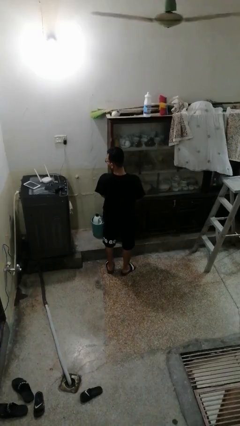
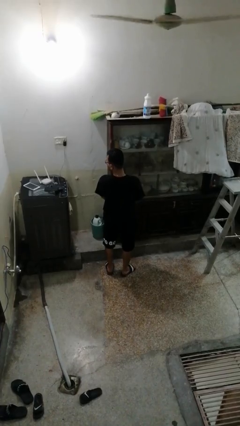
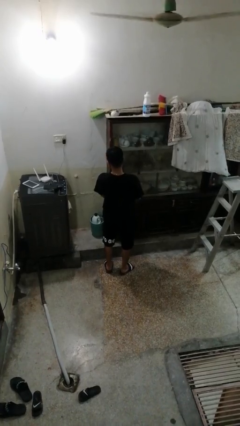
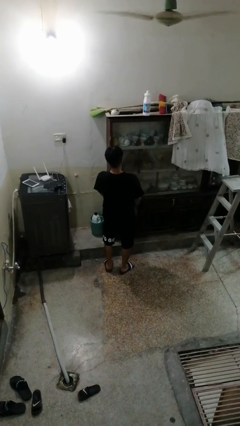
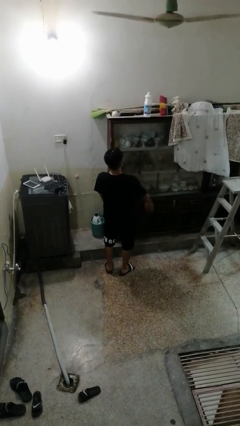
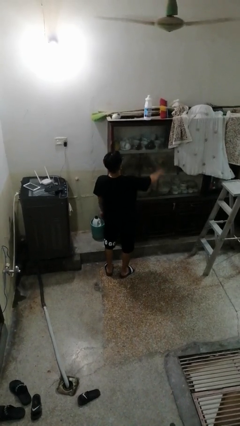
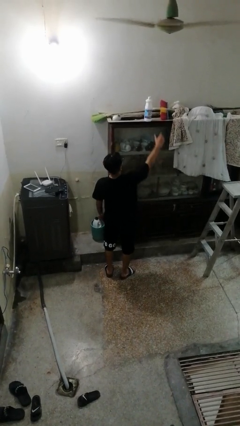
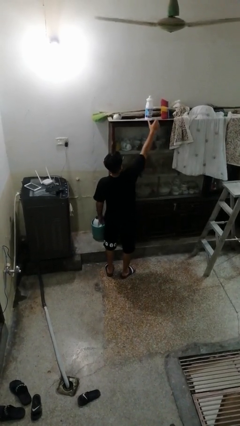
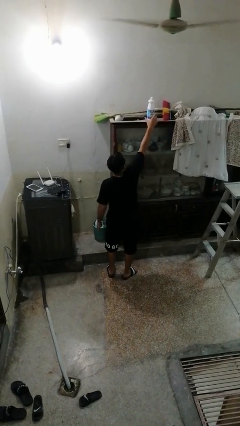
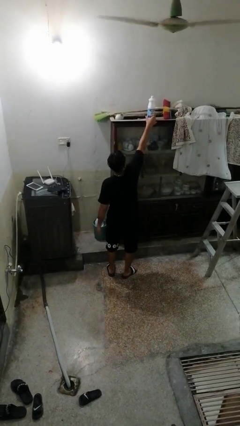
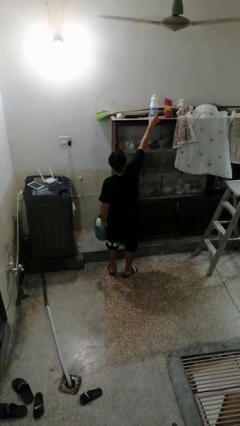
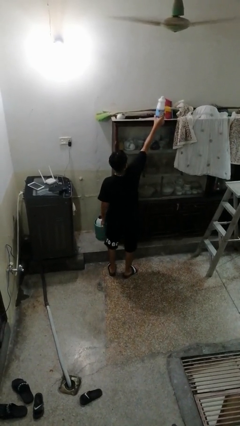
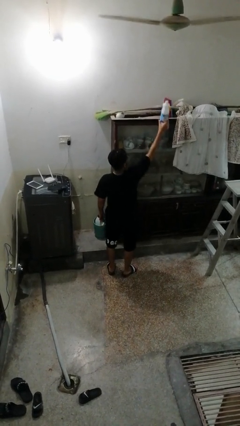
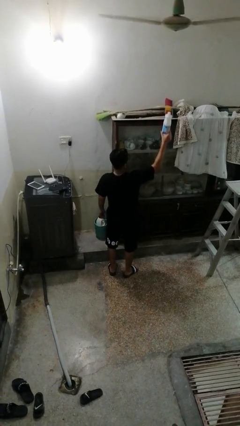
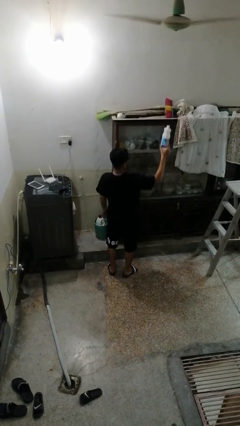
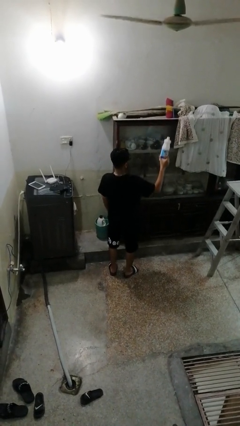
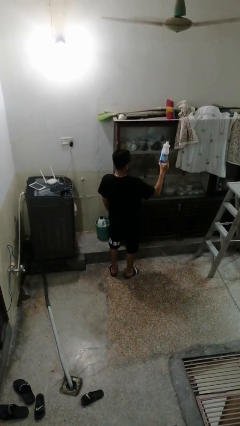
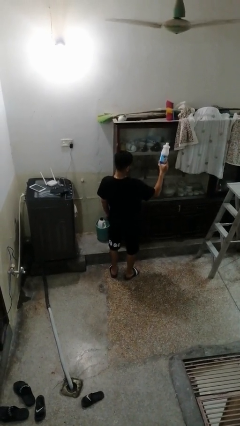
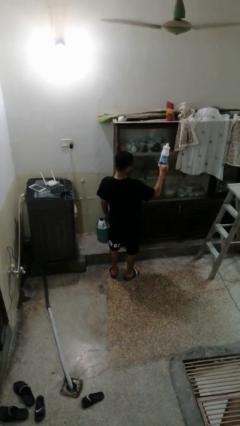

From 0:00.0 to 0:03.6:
person picks up object from shelf

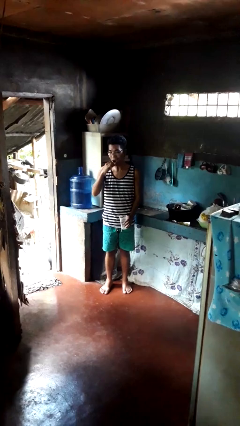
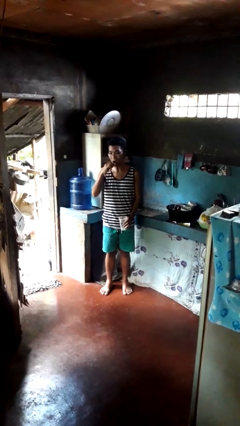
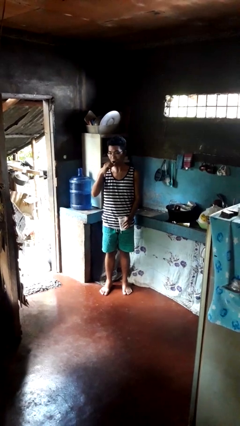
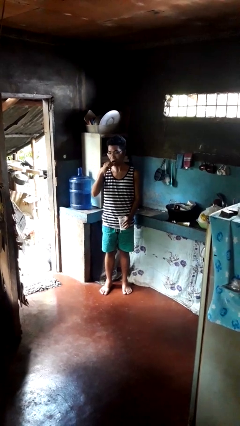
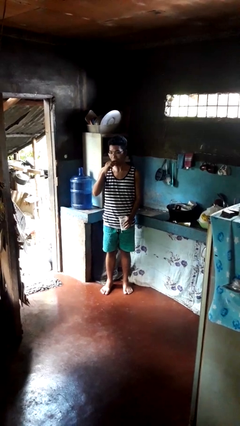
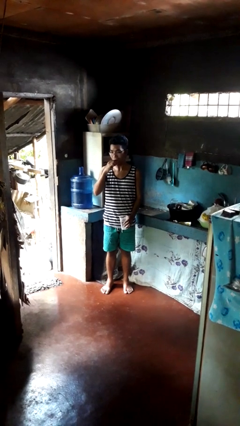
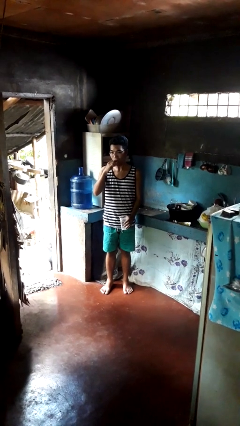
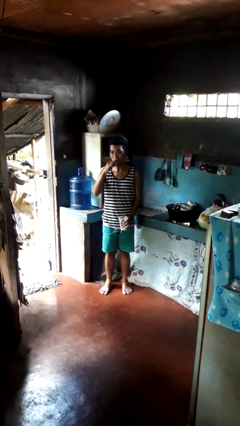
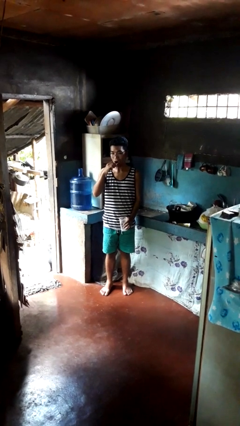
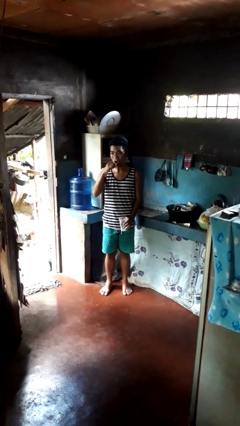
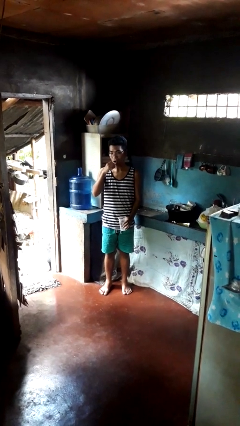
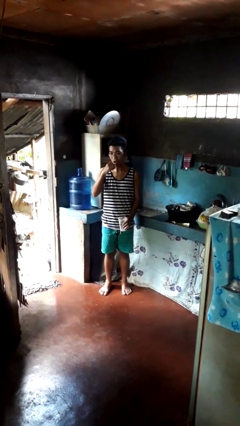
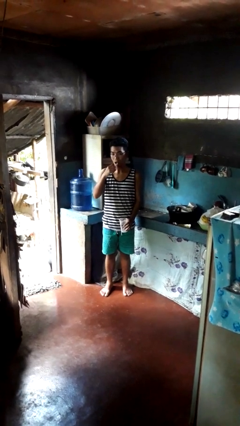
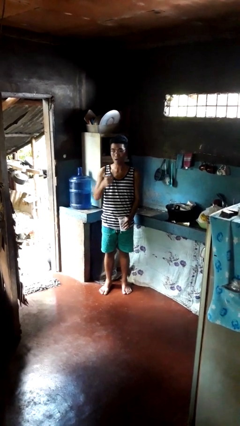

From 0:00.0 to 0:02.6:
person brushes teeth

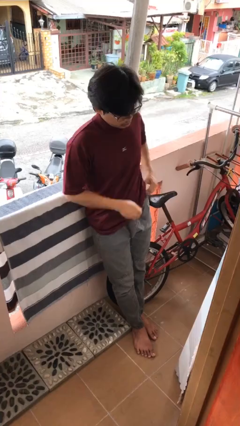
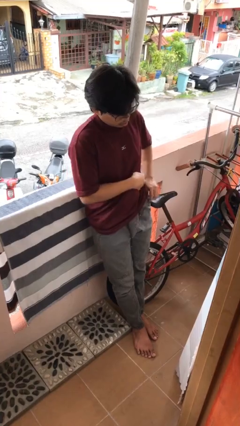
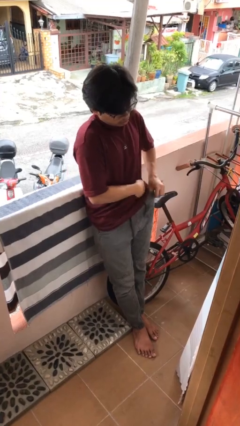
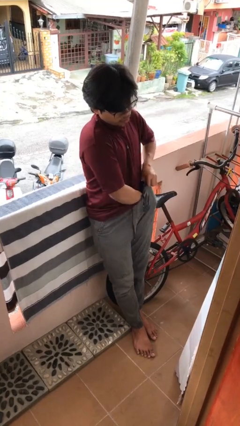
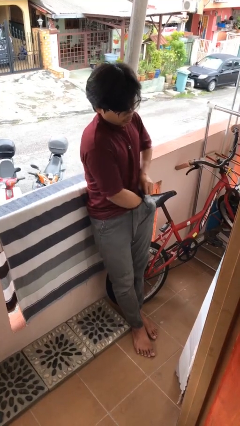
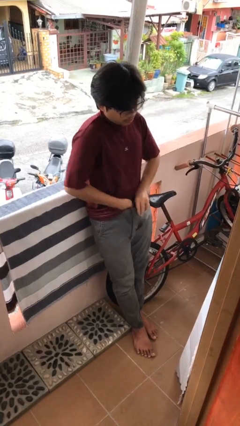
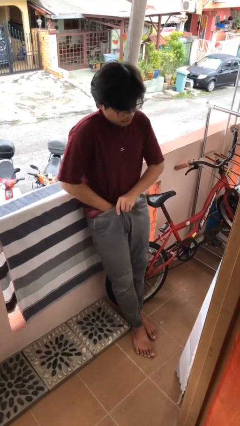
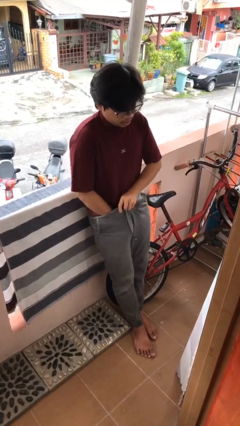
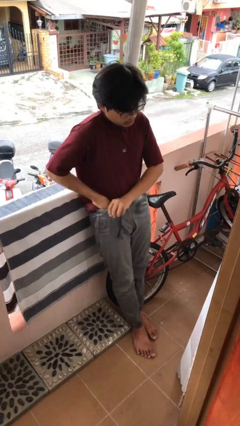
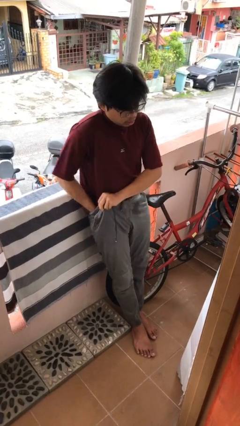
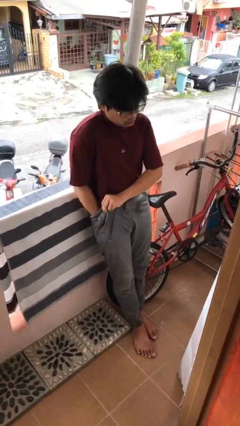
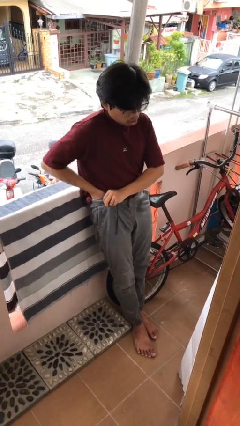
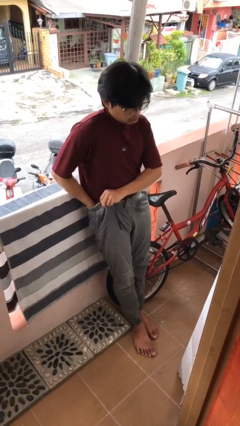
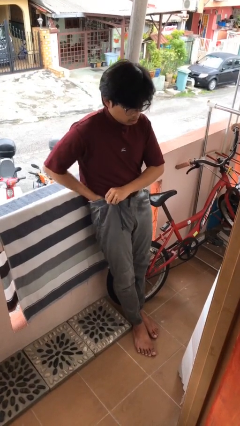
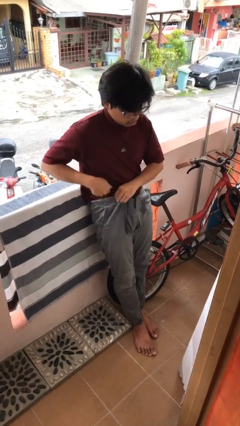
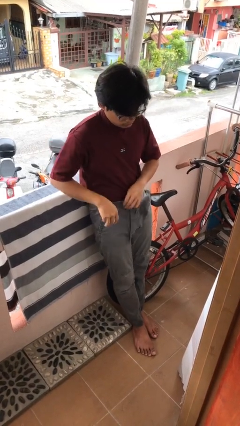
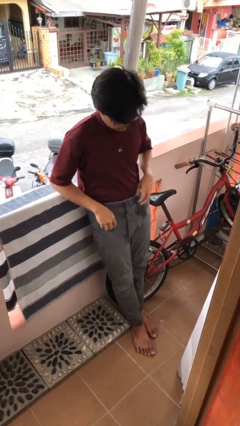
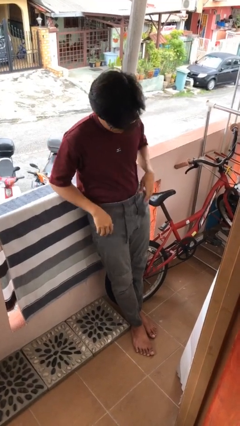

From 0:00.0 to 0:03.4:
person tucks in shirt

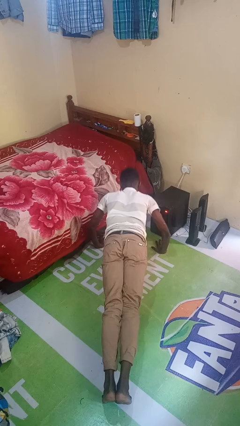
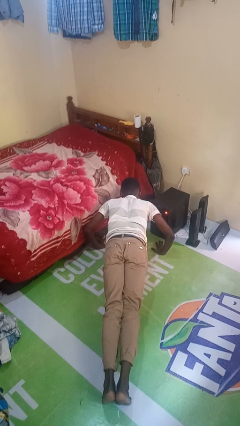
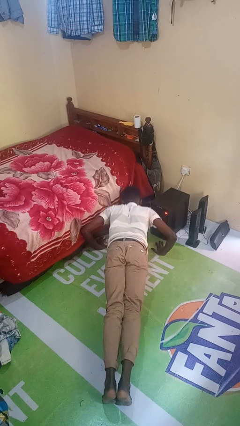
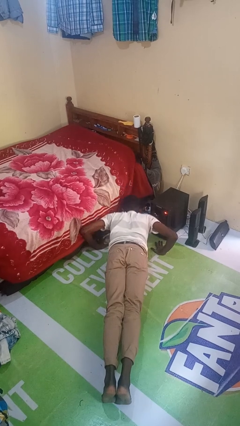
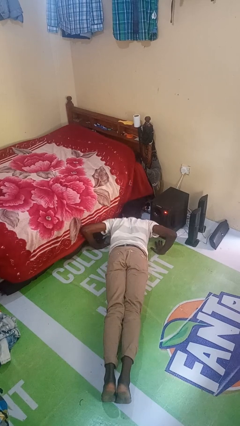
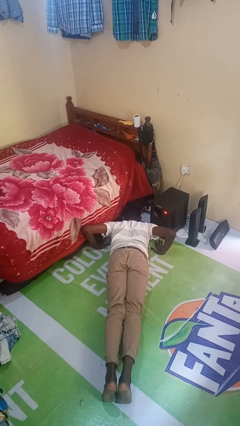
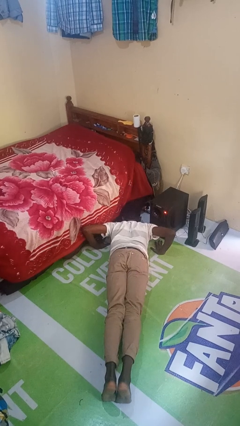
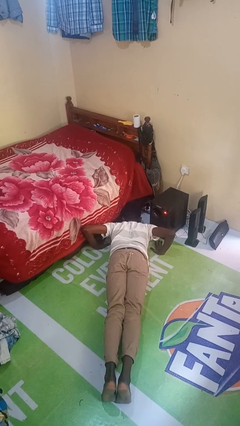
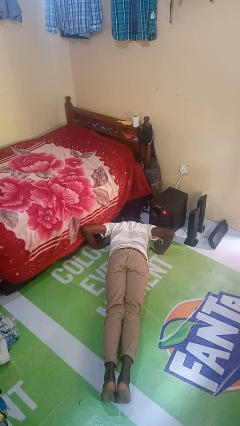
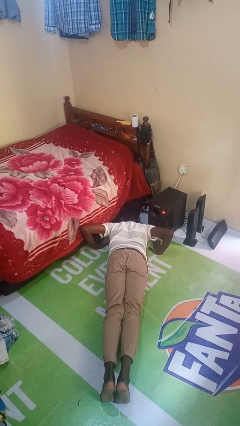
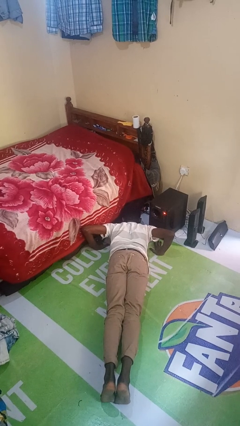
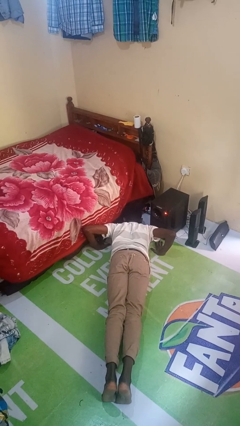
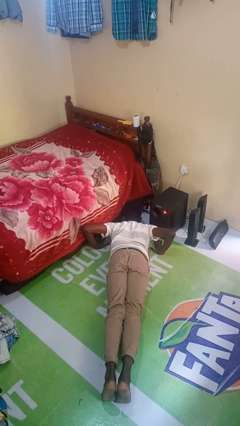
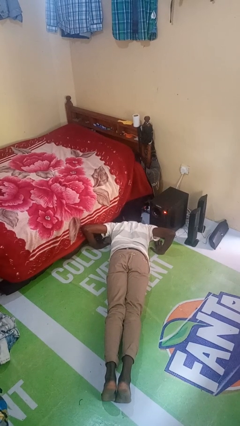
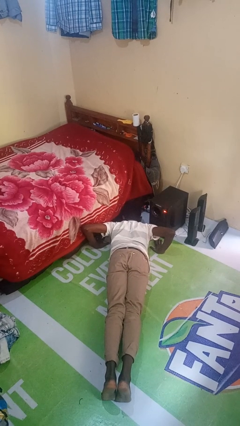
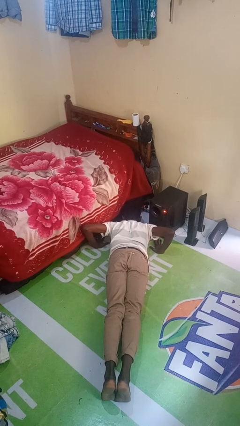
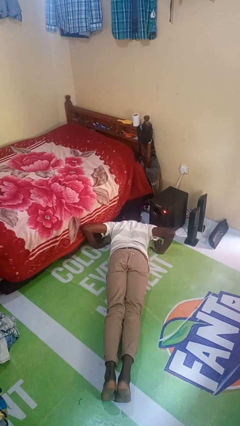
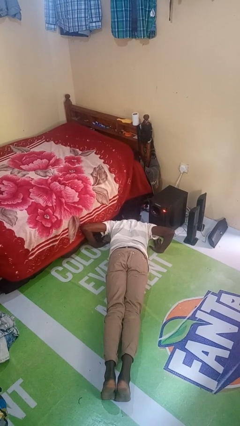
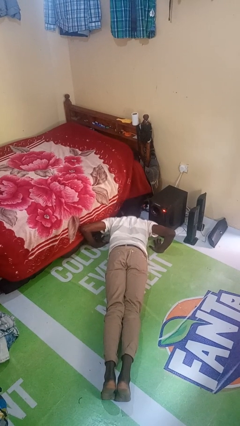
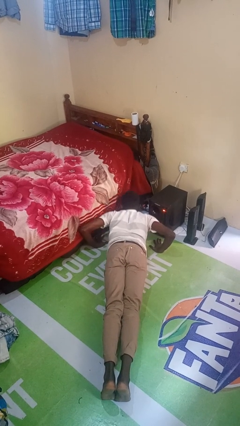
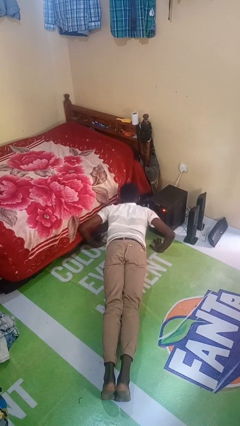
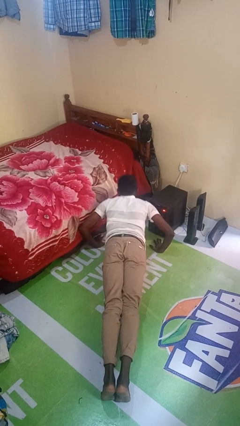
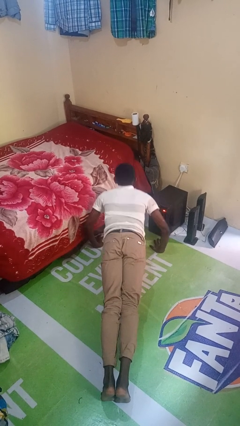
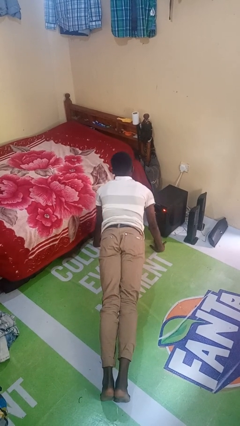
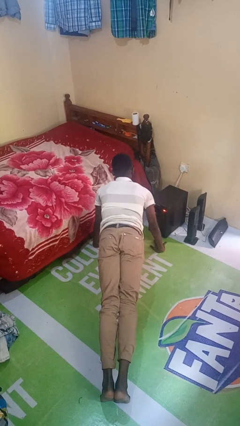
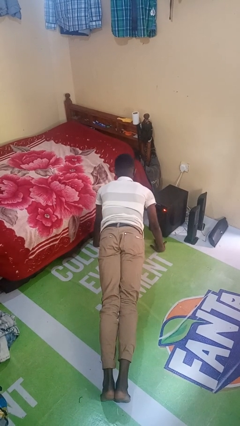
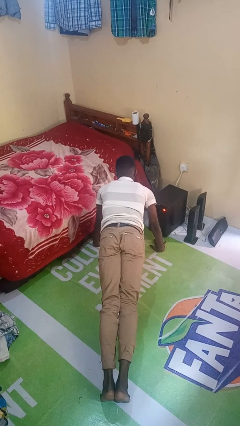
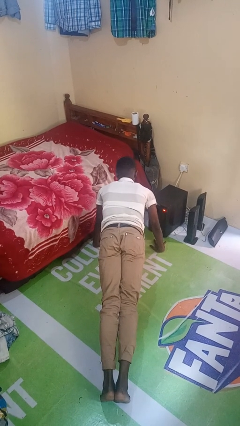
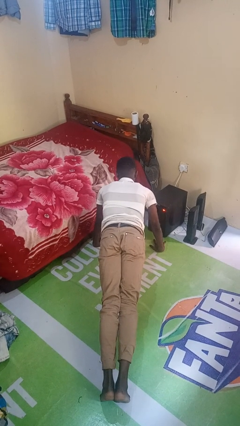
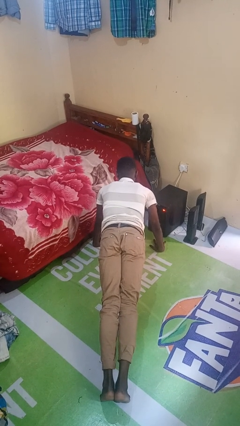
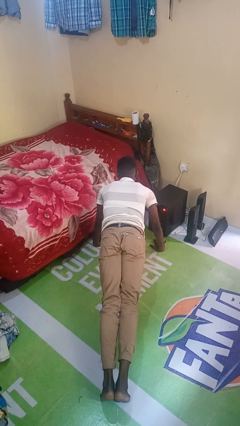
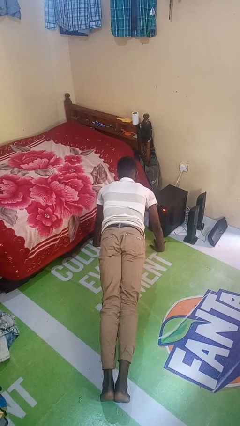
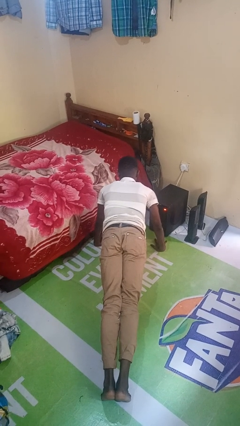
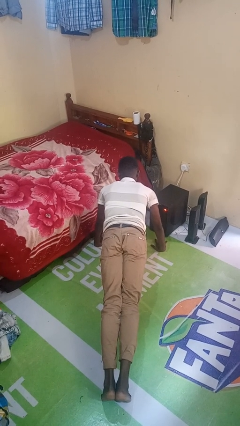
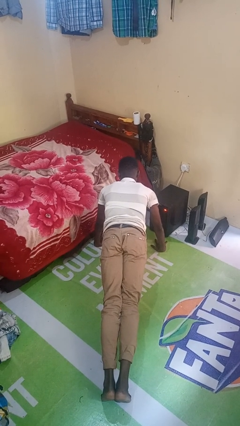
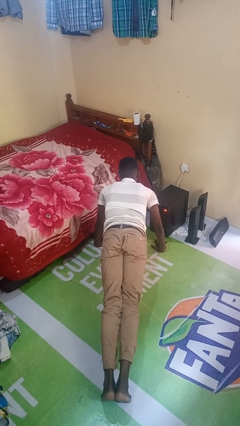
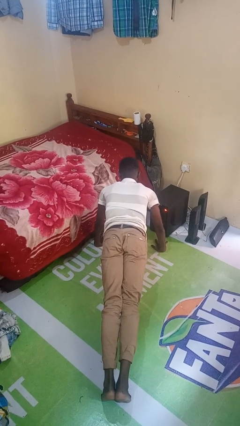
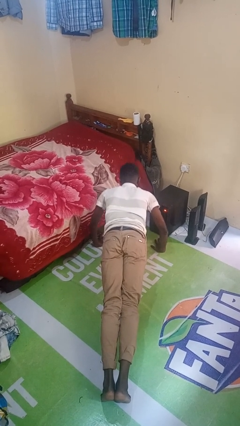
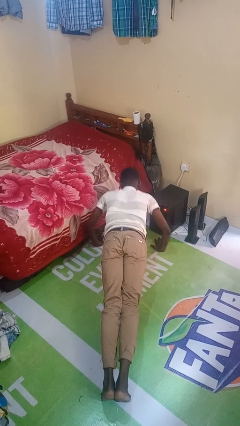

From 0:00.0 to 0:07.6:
person exercises with pushup

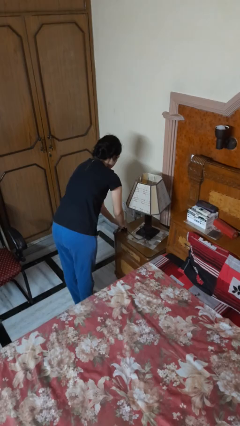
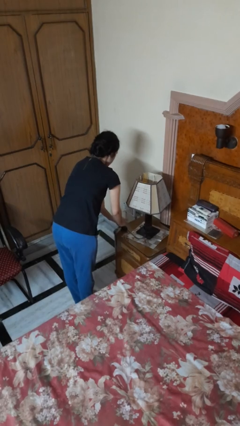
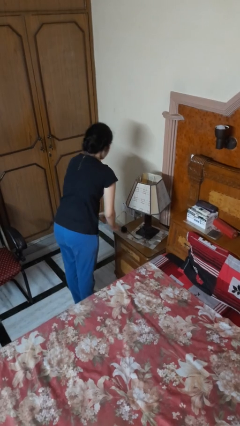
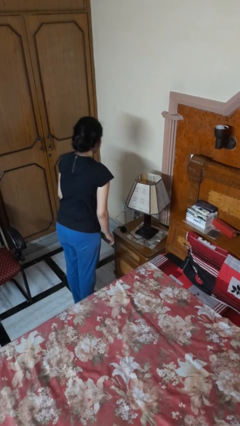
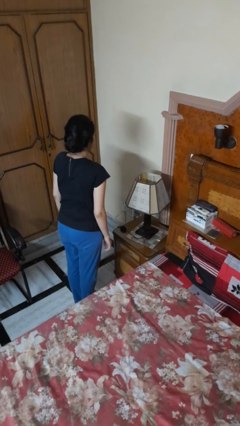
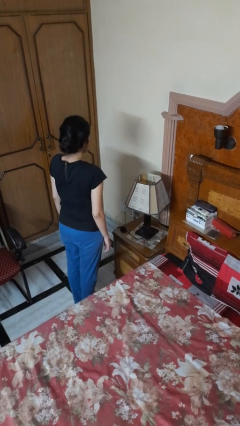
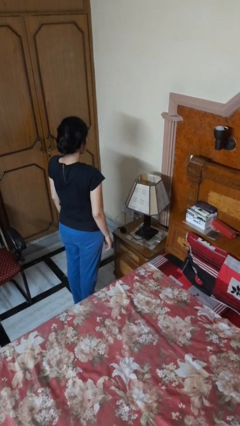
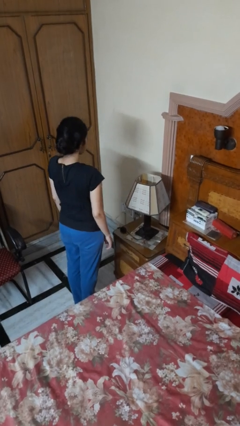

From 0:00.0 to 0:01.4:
person turns off lamp
